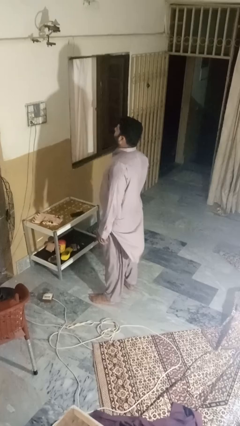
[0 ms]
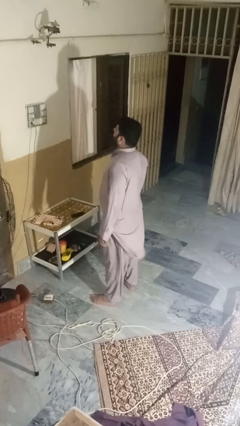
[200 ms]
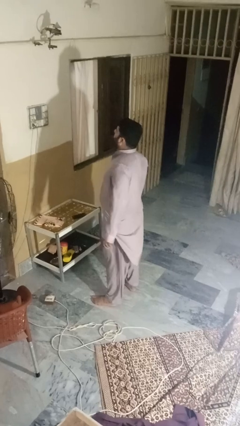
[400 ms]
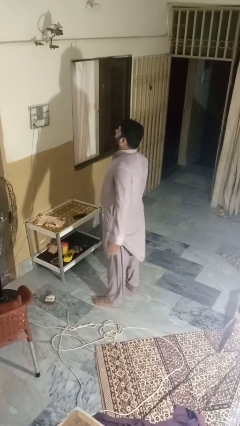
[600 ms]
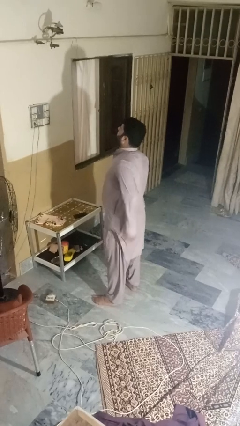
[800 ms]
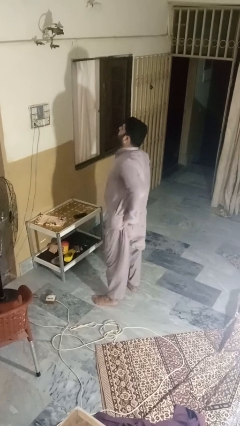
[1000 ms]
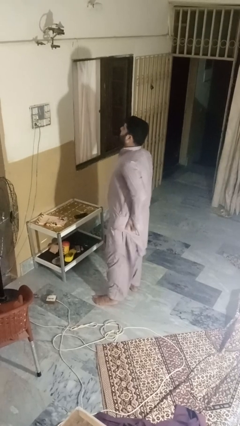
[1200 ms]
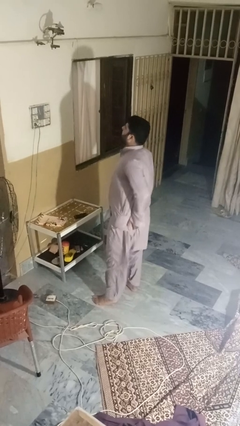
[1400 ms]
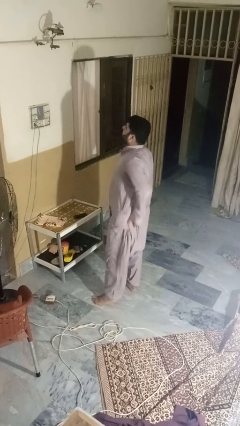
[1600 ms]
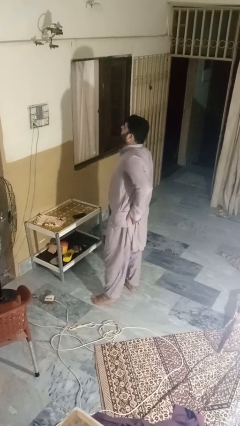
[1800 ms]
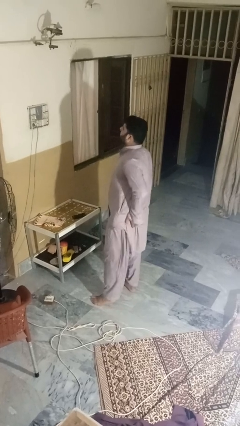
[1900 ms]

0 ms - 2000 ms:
person wiggles hips

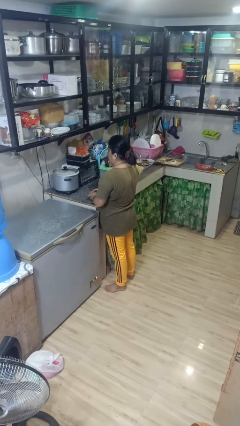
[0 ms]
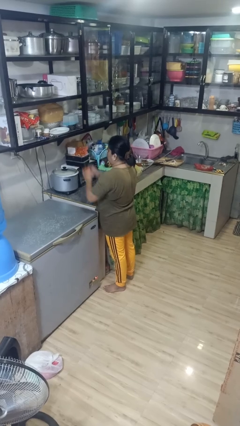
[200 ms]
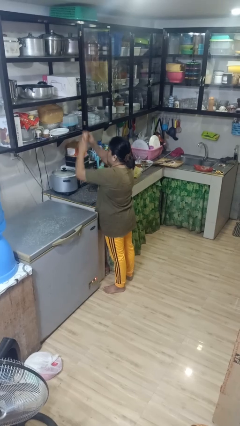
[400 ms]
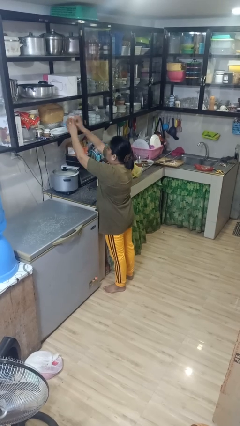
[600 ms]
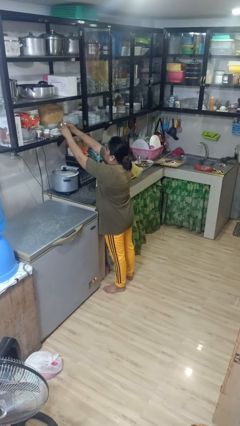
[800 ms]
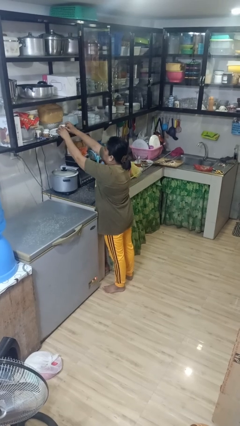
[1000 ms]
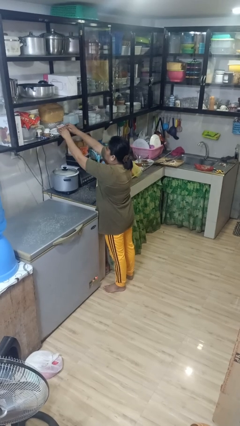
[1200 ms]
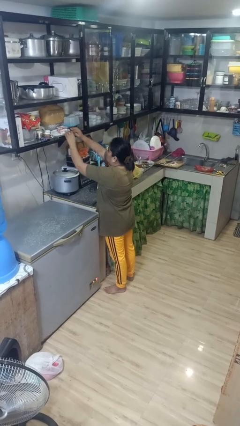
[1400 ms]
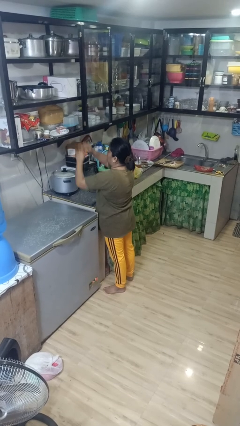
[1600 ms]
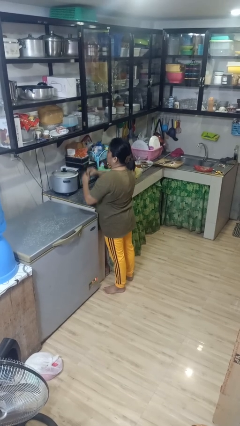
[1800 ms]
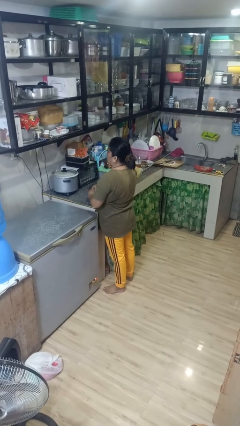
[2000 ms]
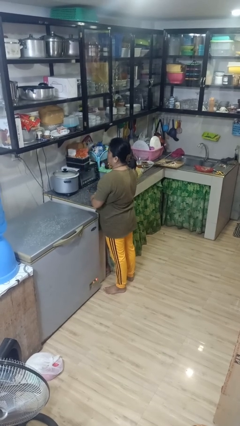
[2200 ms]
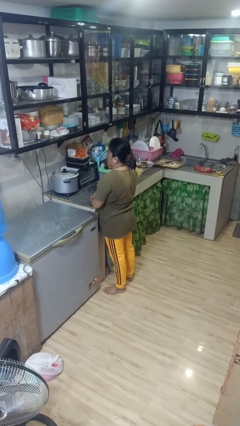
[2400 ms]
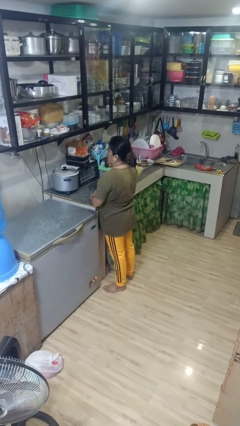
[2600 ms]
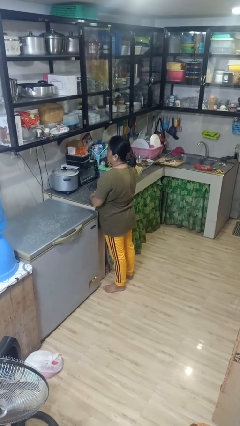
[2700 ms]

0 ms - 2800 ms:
person puts object in cabinet

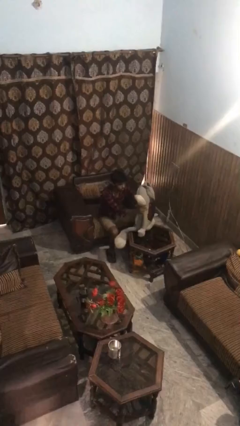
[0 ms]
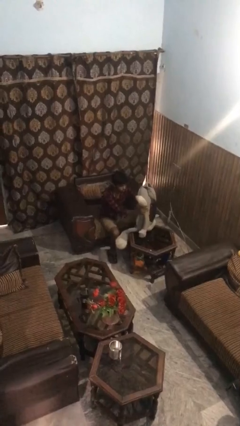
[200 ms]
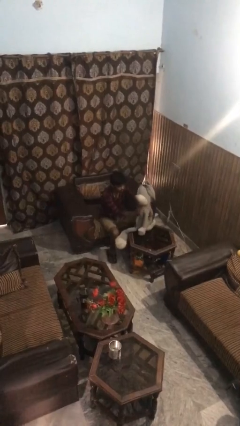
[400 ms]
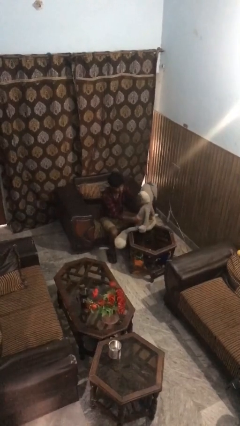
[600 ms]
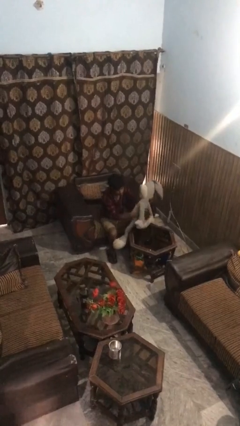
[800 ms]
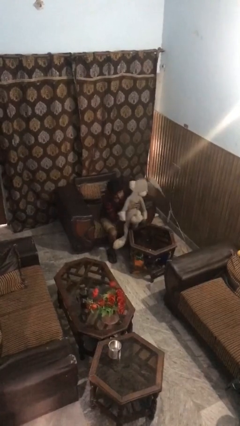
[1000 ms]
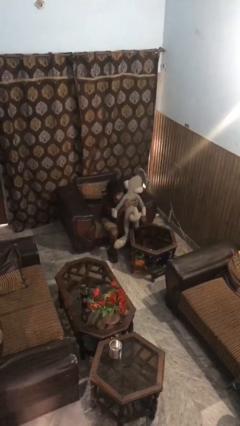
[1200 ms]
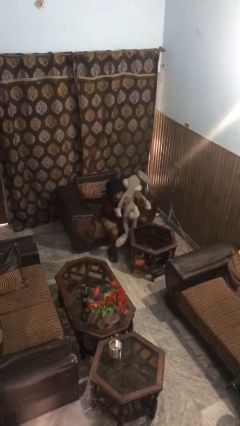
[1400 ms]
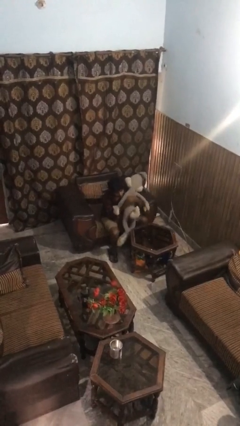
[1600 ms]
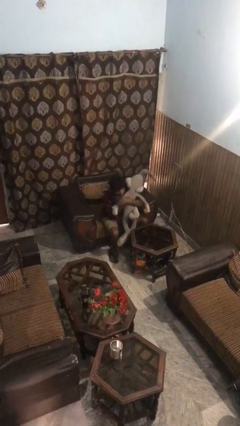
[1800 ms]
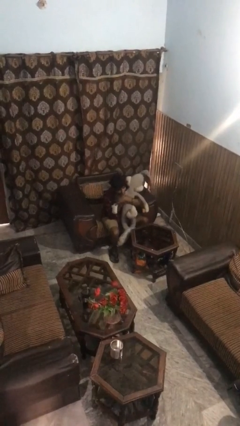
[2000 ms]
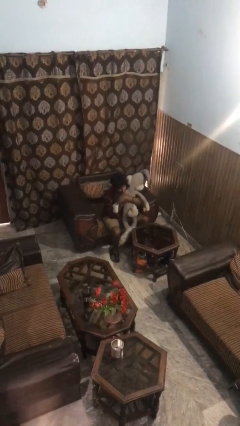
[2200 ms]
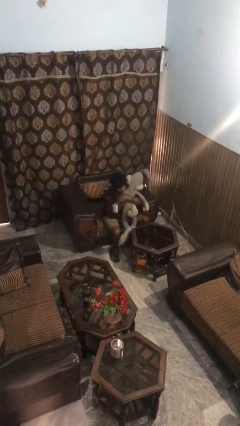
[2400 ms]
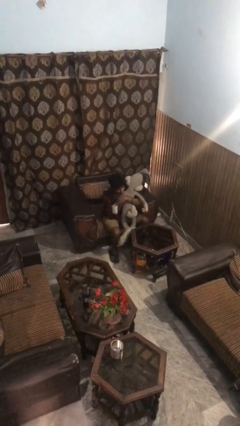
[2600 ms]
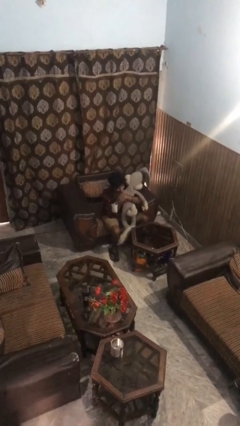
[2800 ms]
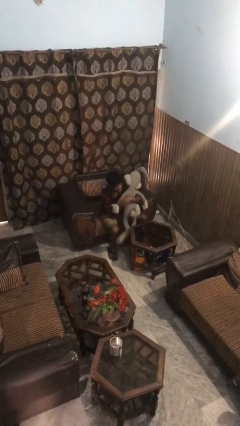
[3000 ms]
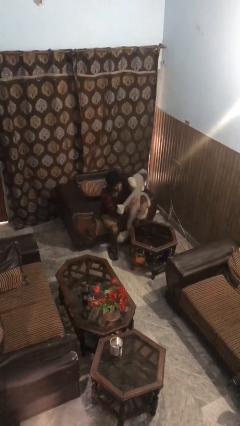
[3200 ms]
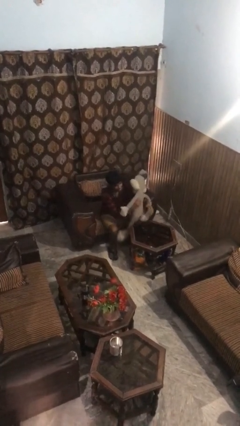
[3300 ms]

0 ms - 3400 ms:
person hugs stuffed animal

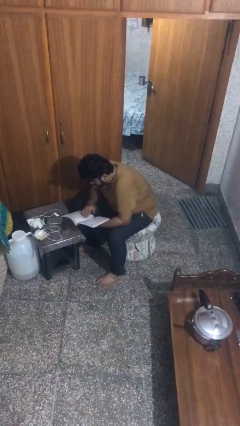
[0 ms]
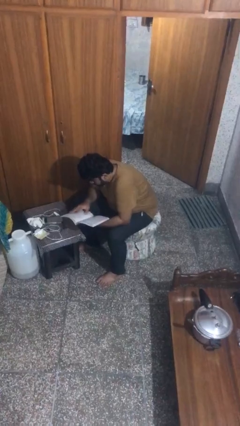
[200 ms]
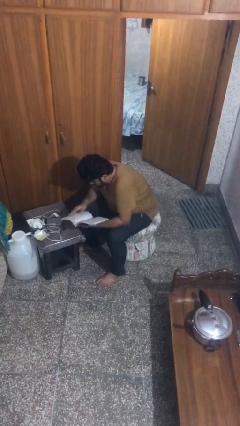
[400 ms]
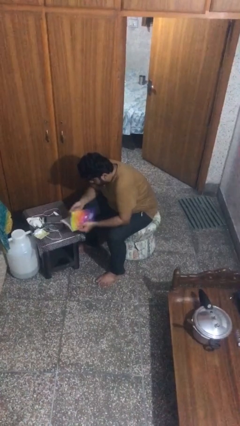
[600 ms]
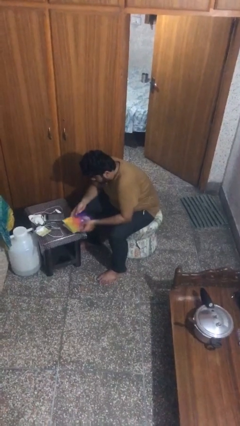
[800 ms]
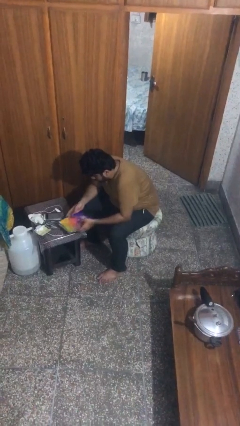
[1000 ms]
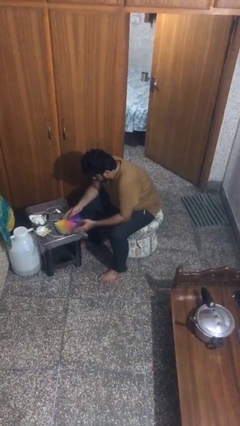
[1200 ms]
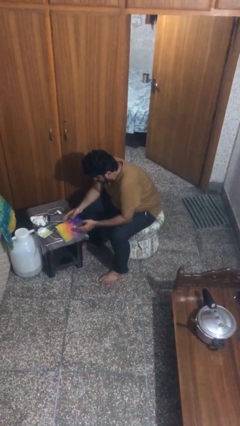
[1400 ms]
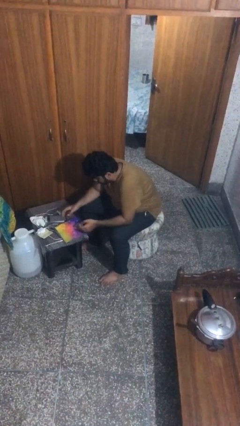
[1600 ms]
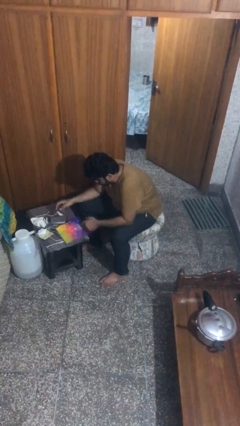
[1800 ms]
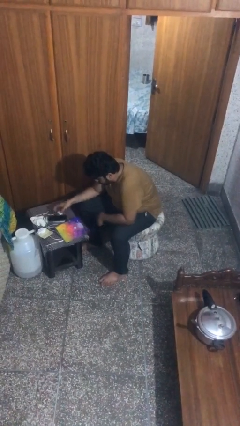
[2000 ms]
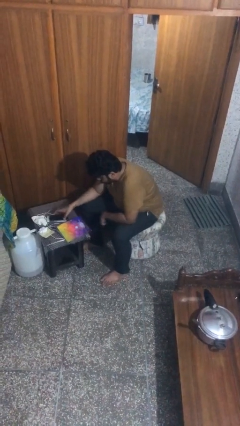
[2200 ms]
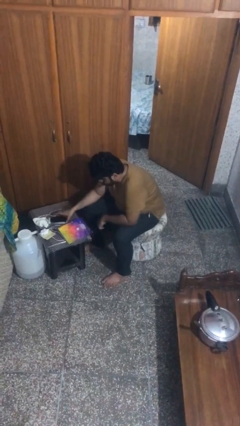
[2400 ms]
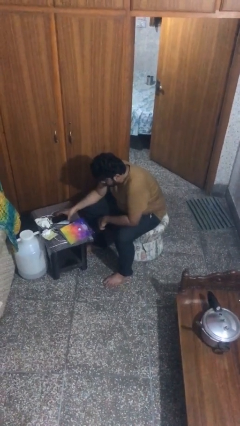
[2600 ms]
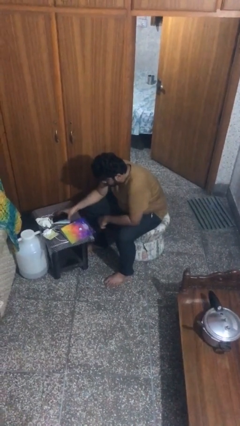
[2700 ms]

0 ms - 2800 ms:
person puts down object on table

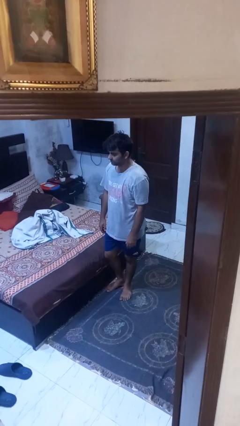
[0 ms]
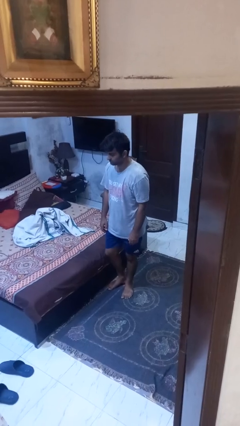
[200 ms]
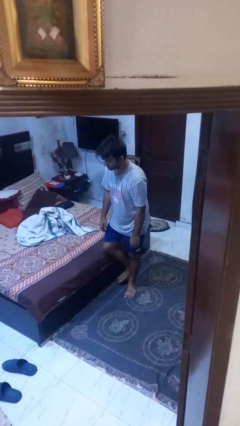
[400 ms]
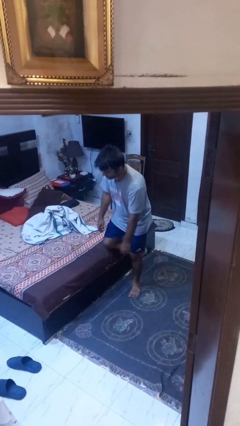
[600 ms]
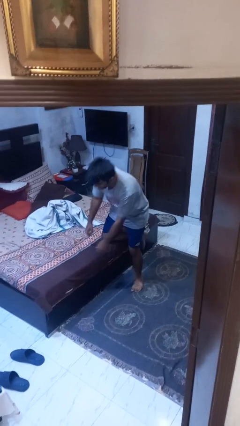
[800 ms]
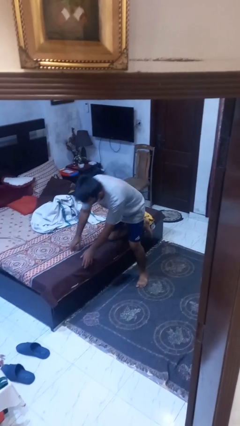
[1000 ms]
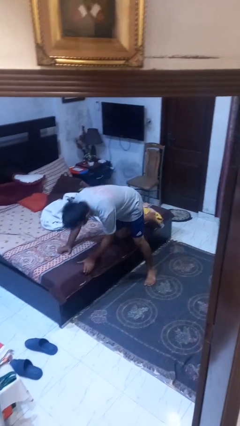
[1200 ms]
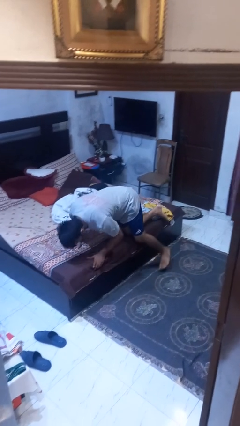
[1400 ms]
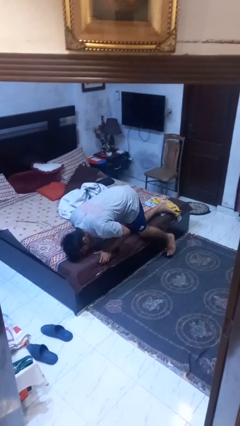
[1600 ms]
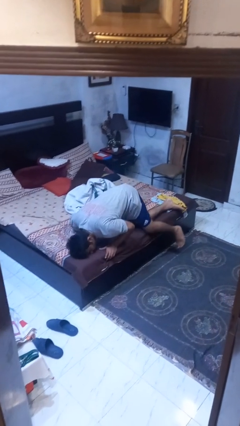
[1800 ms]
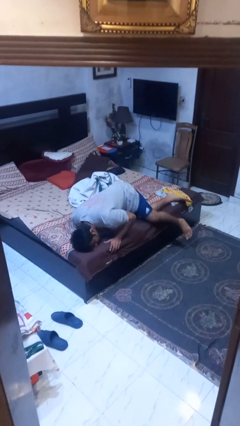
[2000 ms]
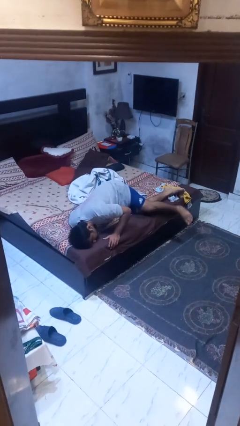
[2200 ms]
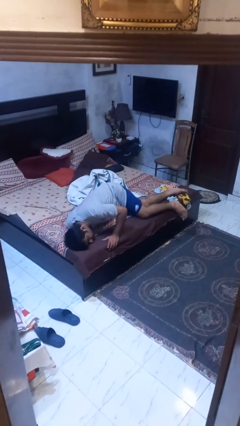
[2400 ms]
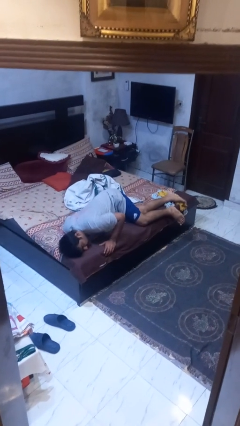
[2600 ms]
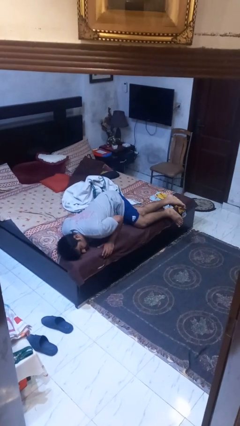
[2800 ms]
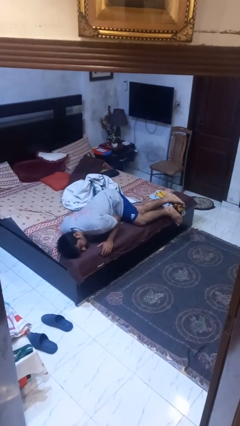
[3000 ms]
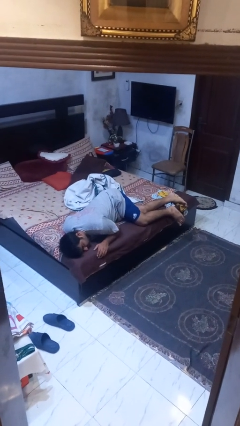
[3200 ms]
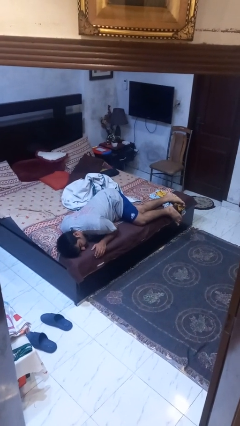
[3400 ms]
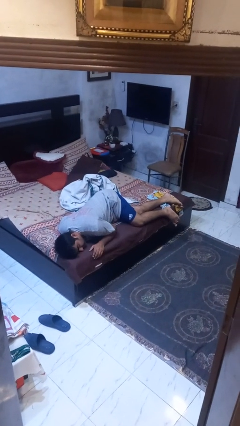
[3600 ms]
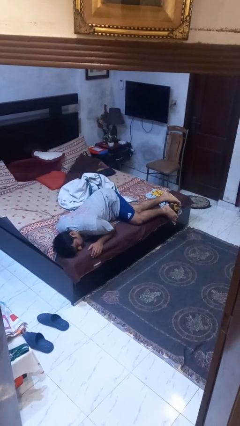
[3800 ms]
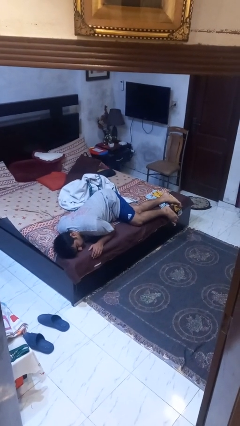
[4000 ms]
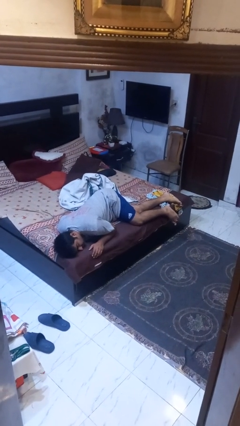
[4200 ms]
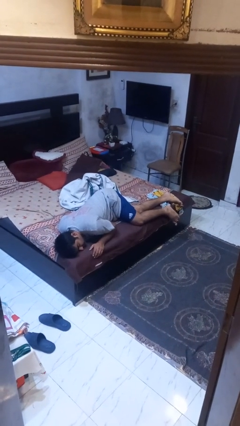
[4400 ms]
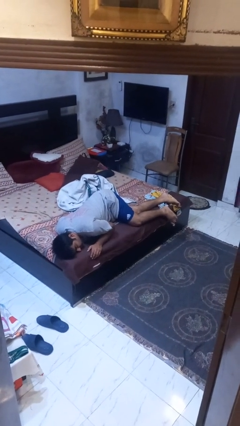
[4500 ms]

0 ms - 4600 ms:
person lies down on bed

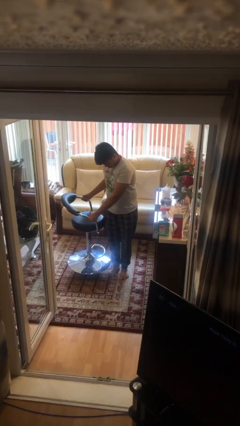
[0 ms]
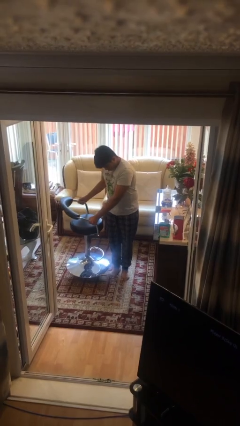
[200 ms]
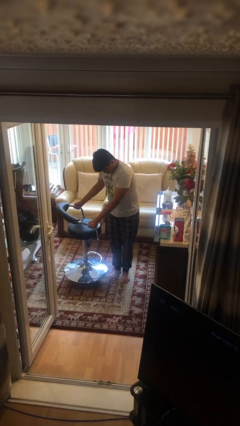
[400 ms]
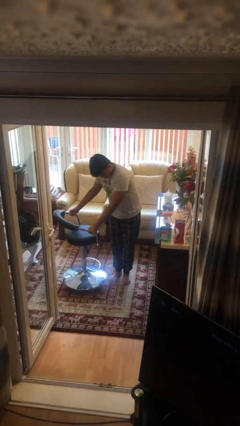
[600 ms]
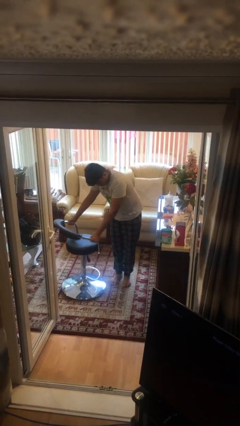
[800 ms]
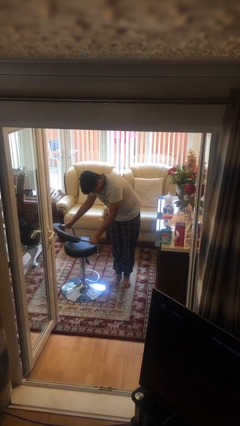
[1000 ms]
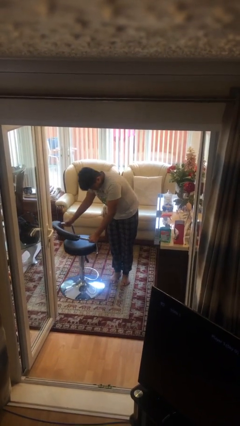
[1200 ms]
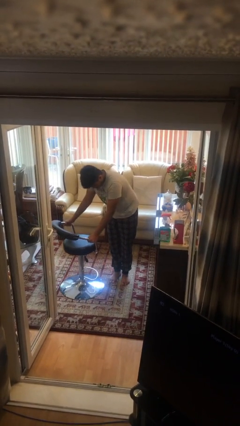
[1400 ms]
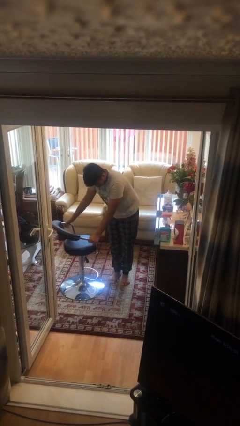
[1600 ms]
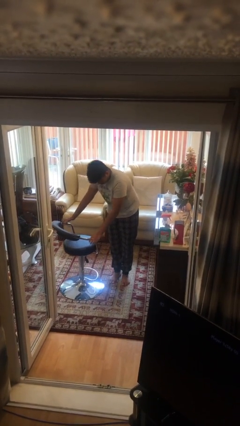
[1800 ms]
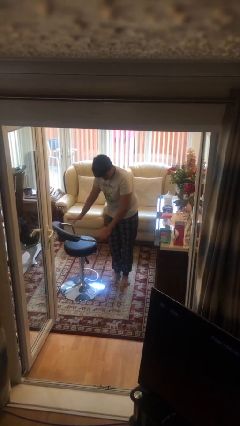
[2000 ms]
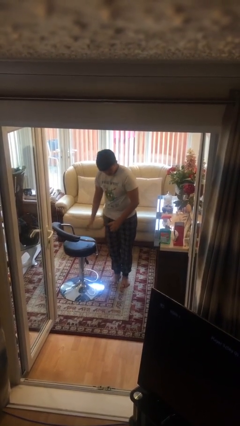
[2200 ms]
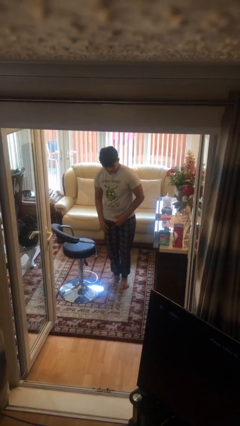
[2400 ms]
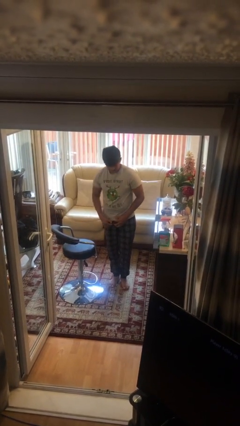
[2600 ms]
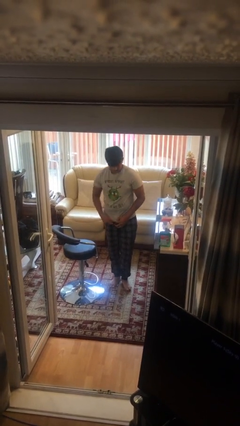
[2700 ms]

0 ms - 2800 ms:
person puts down object on floor
